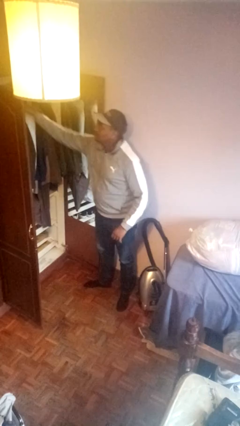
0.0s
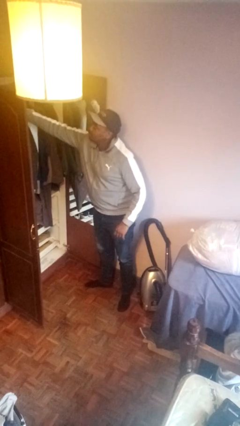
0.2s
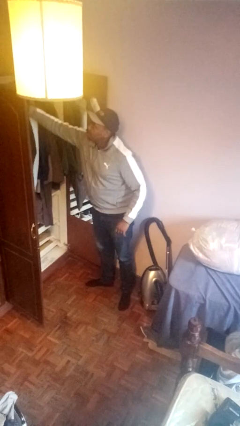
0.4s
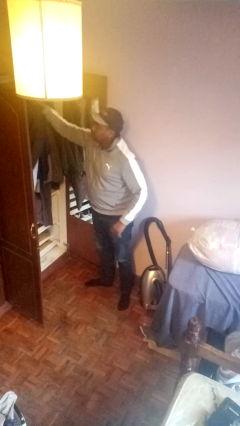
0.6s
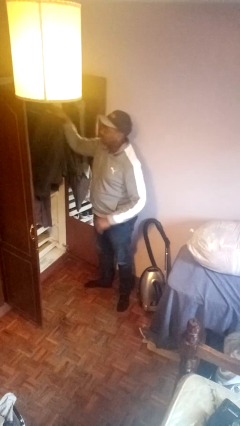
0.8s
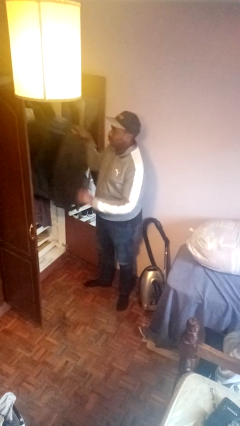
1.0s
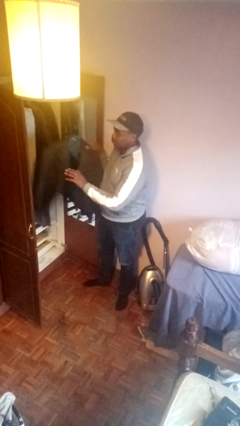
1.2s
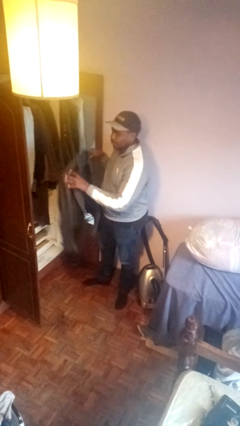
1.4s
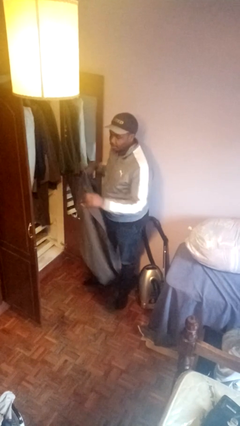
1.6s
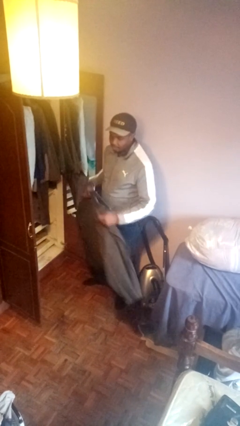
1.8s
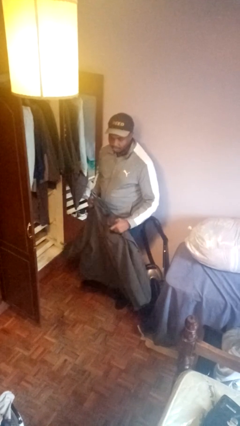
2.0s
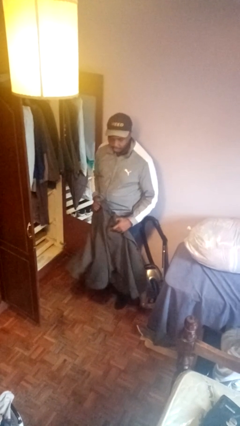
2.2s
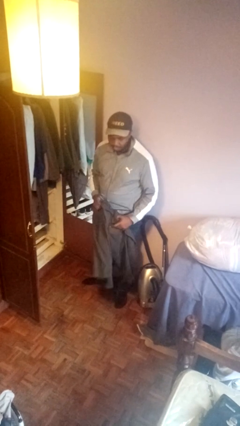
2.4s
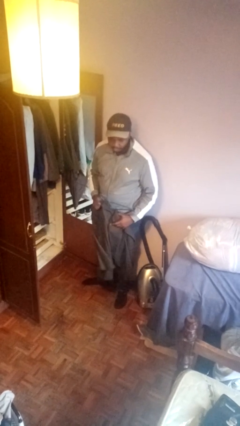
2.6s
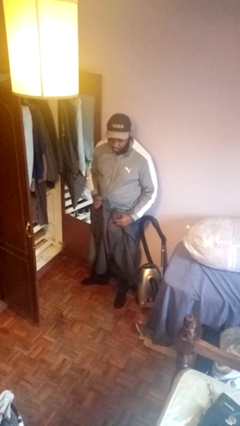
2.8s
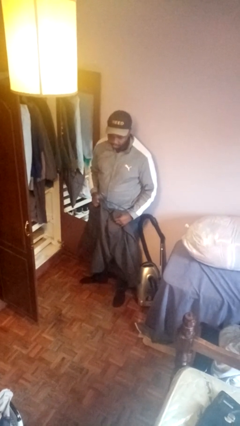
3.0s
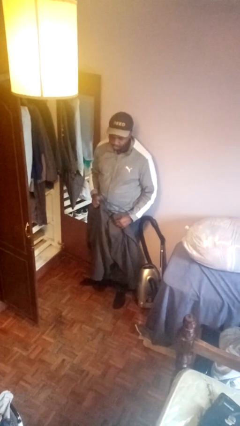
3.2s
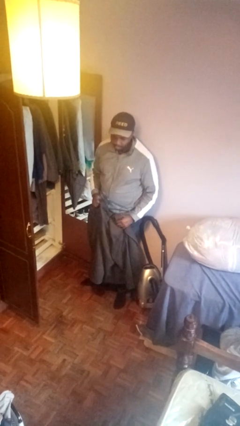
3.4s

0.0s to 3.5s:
person takes clothes from closet

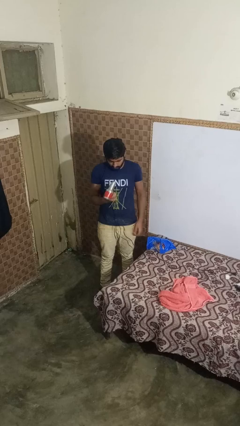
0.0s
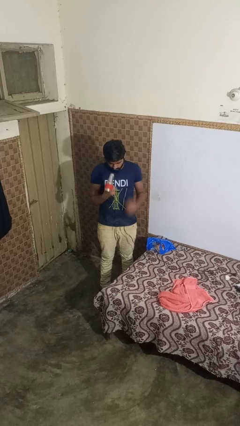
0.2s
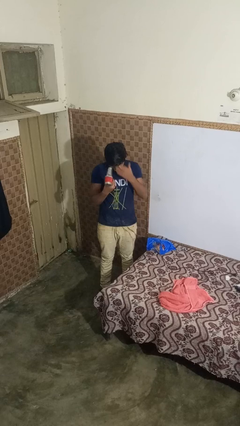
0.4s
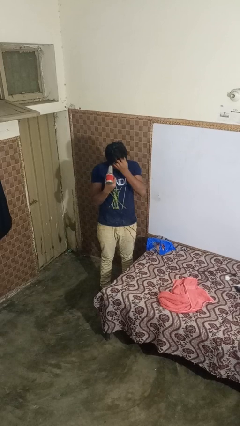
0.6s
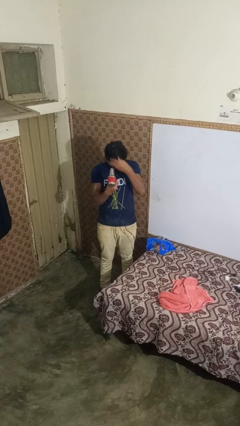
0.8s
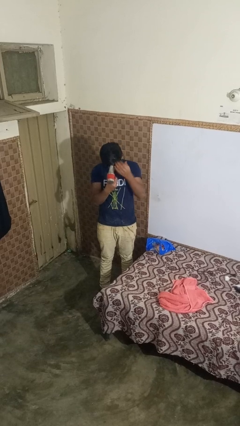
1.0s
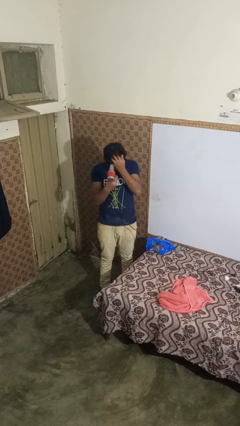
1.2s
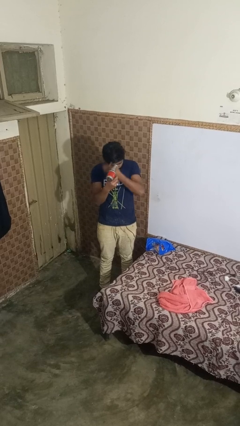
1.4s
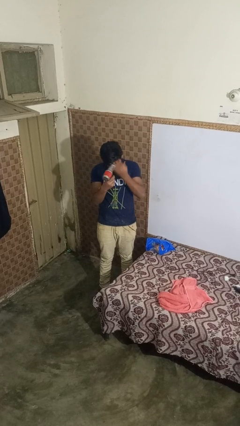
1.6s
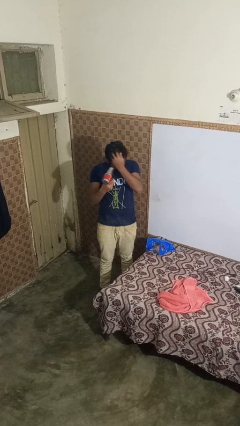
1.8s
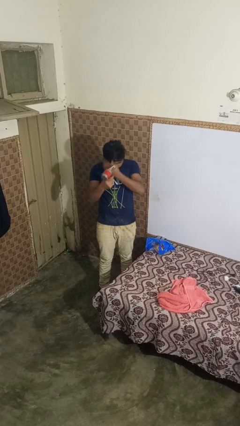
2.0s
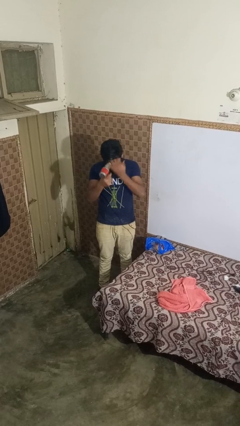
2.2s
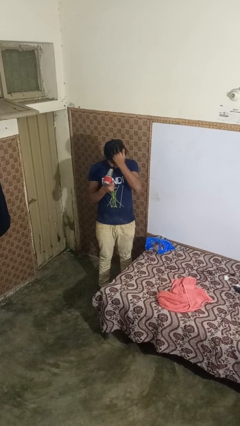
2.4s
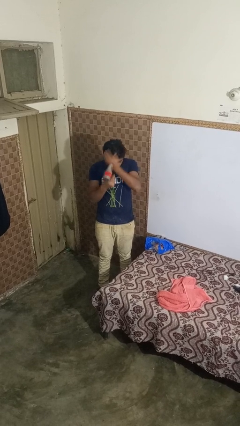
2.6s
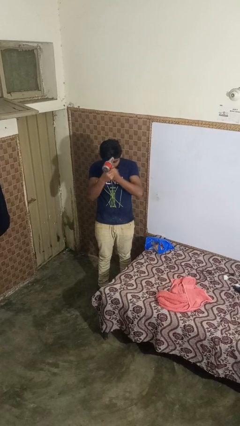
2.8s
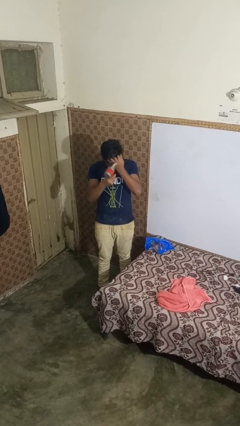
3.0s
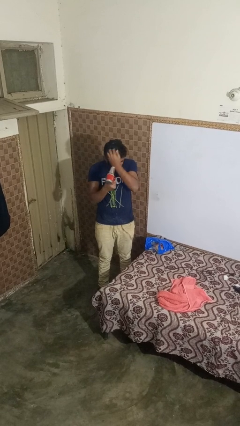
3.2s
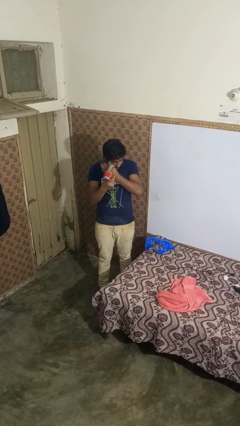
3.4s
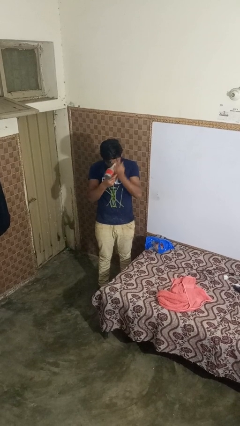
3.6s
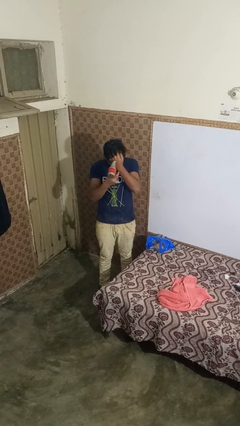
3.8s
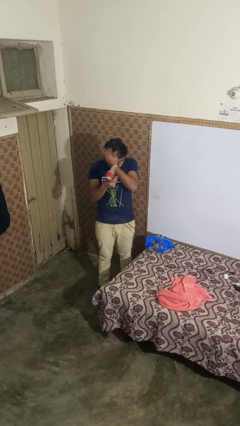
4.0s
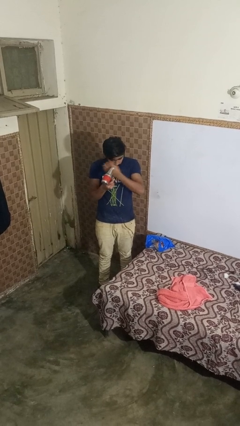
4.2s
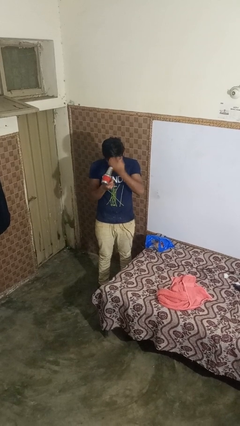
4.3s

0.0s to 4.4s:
person dries hair with hairdryer

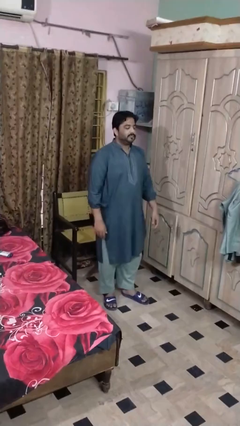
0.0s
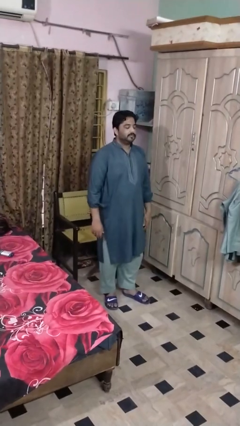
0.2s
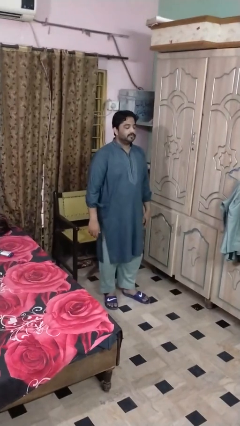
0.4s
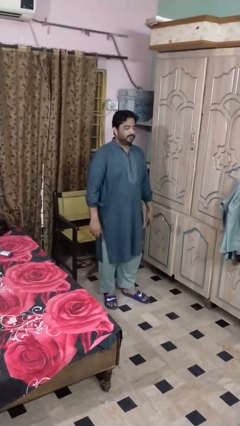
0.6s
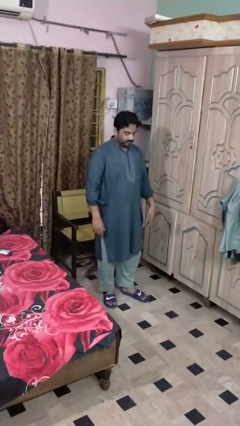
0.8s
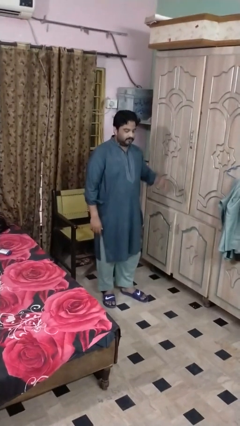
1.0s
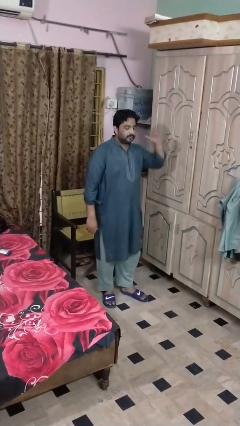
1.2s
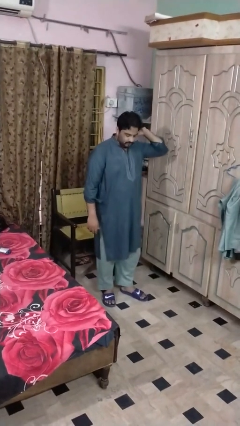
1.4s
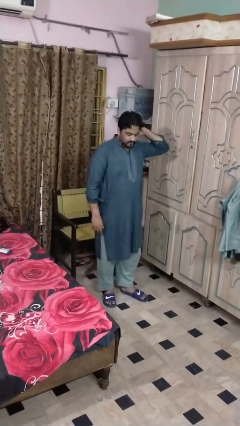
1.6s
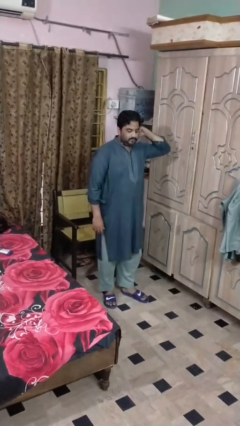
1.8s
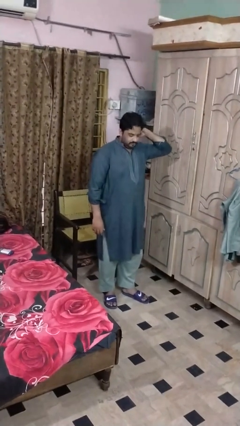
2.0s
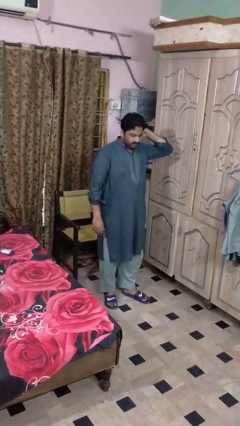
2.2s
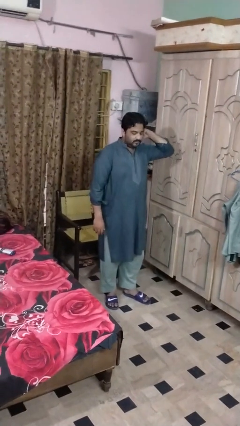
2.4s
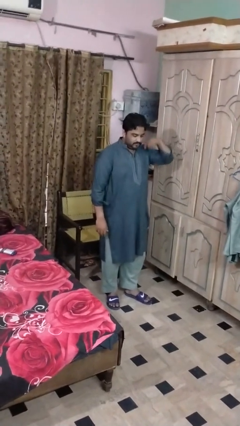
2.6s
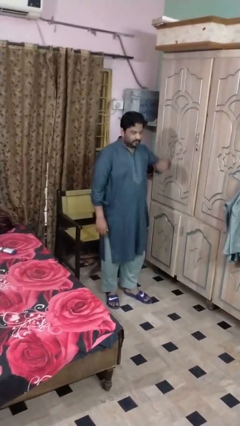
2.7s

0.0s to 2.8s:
person nods head

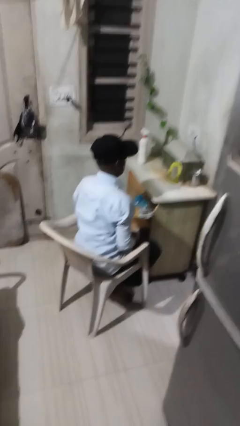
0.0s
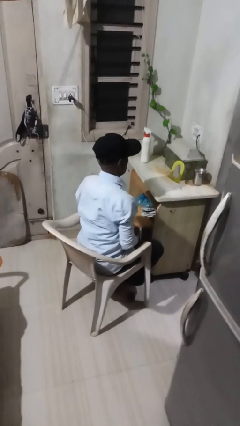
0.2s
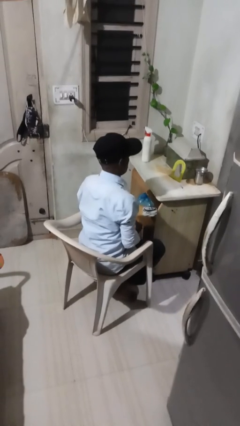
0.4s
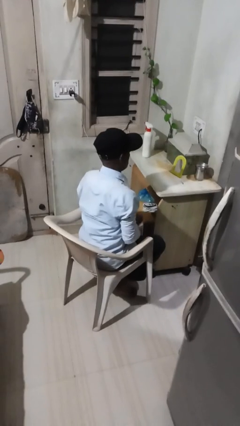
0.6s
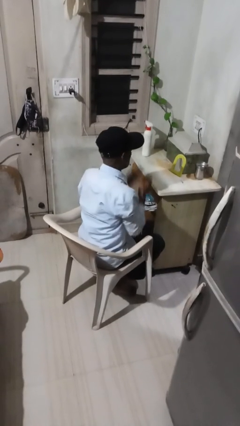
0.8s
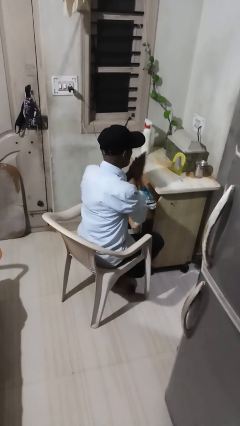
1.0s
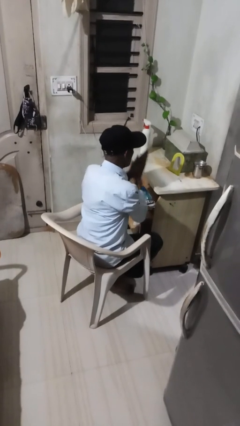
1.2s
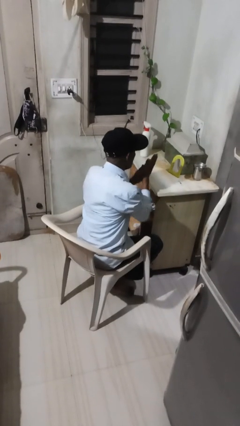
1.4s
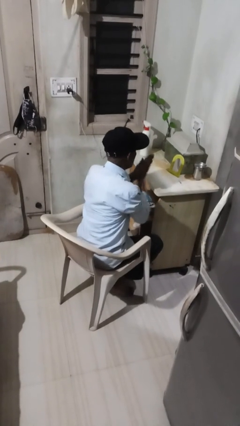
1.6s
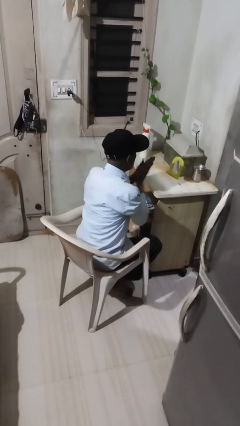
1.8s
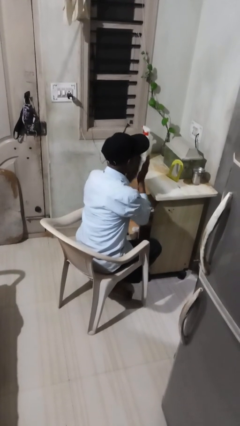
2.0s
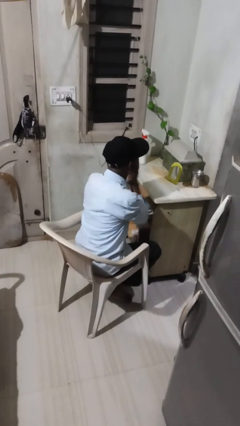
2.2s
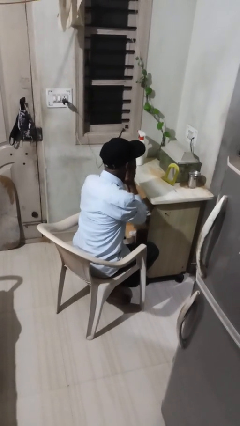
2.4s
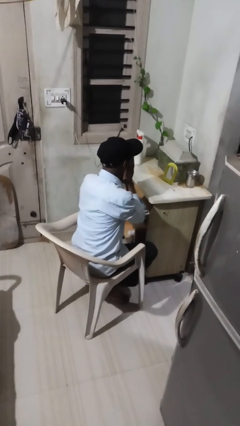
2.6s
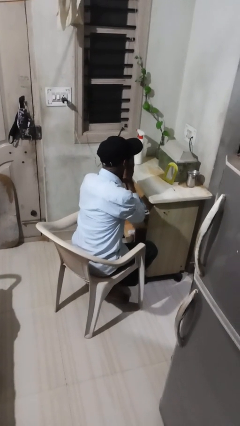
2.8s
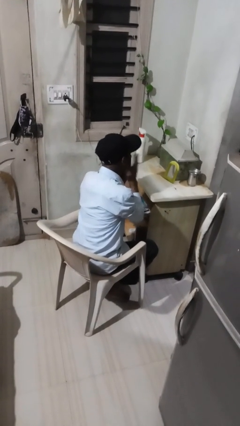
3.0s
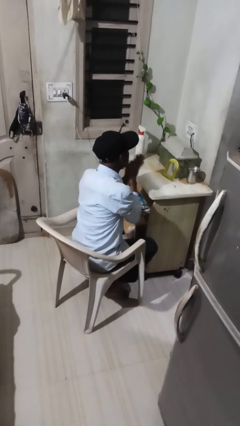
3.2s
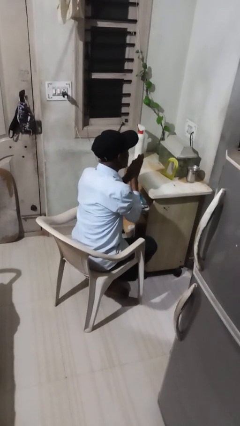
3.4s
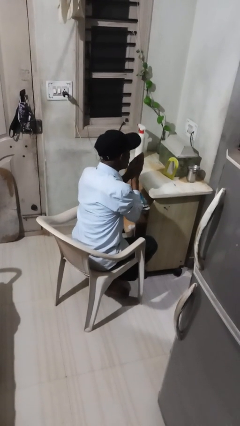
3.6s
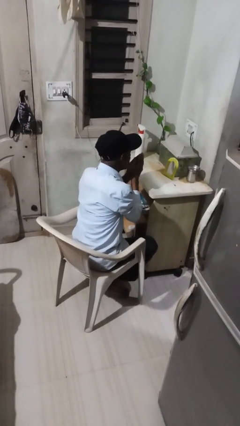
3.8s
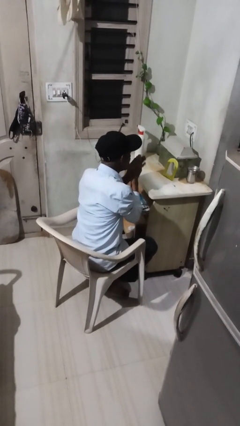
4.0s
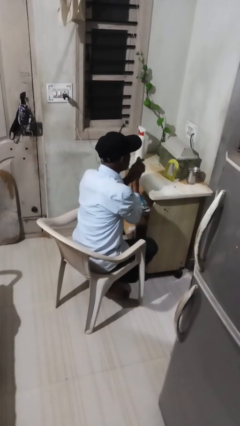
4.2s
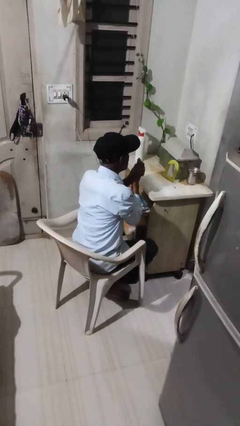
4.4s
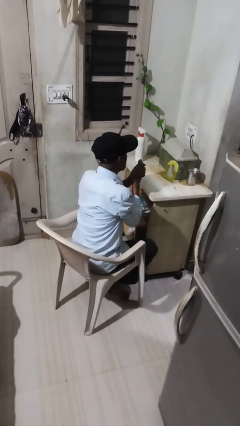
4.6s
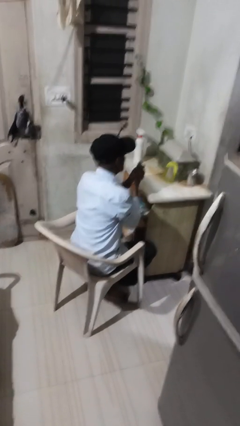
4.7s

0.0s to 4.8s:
person blows into hands

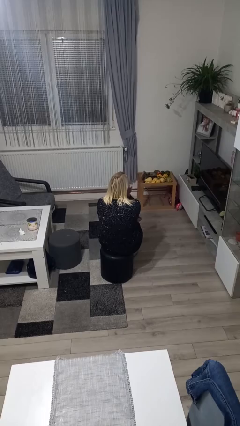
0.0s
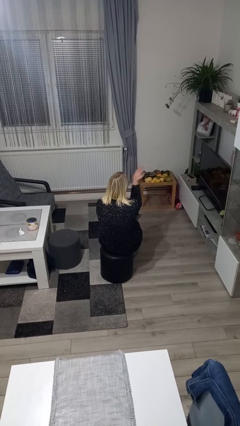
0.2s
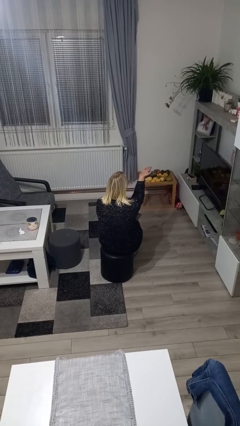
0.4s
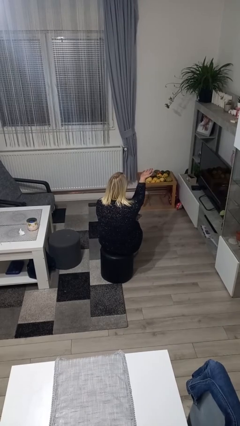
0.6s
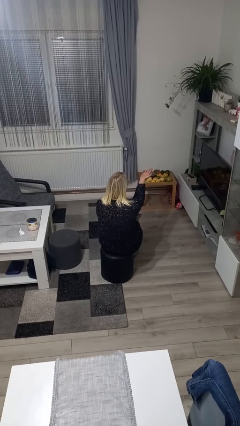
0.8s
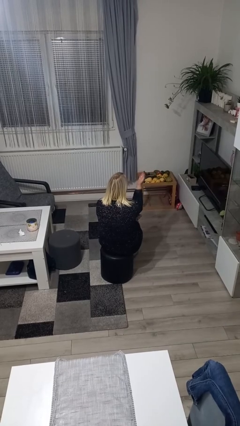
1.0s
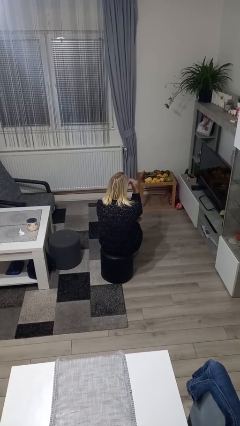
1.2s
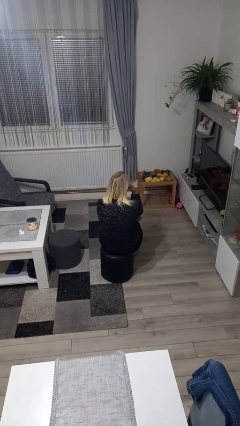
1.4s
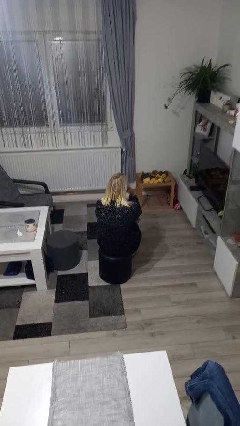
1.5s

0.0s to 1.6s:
person gestures blow kiss

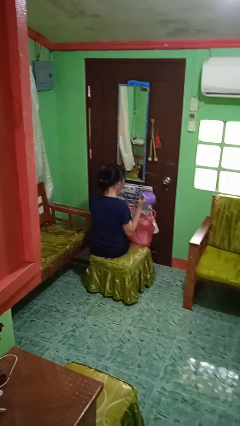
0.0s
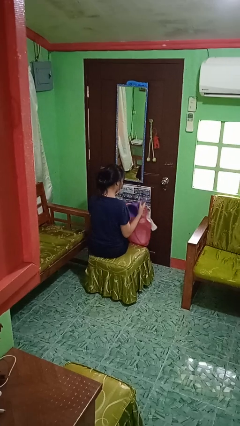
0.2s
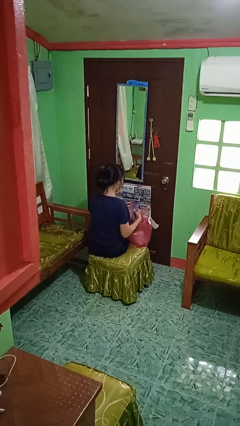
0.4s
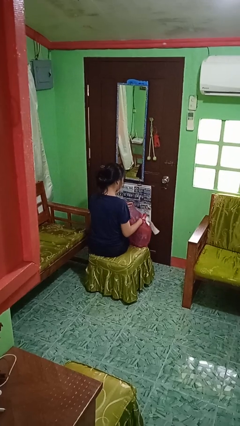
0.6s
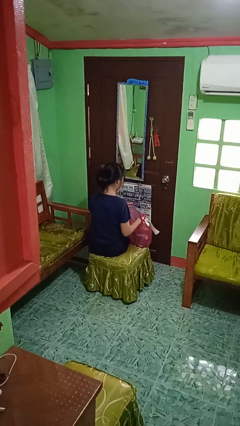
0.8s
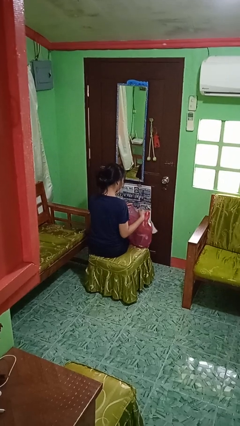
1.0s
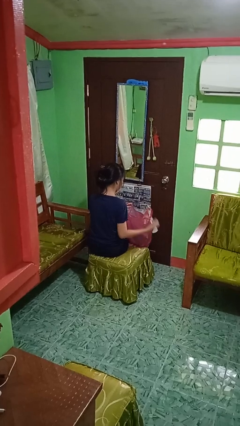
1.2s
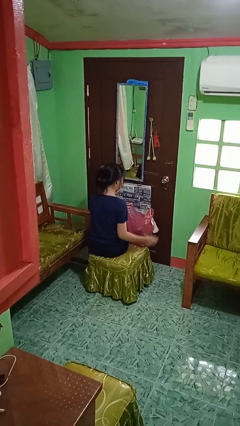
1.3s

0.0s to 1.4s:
person puts object into bag
